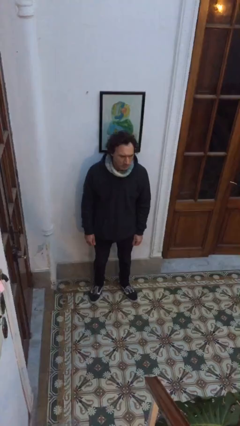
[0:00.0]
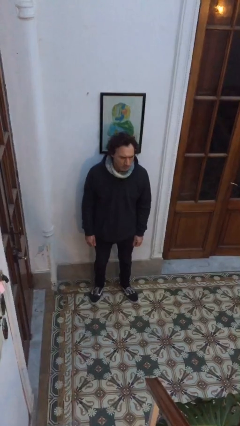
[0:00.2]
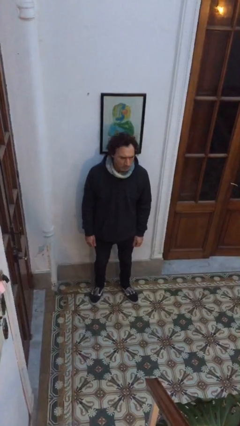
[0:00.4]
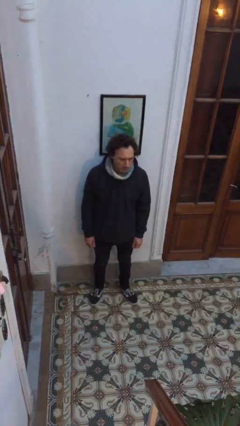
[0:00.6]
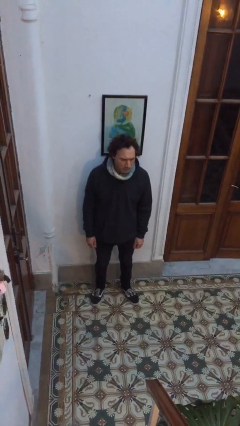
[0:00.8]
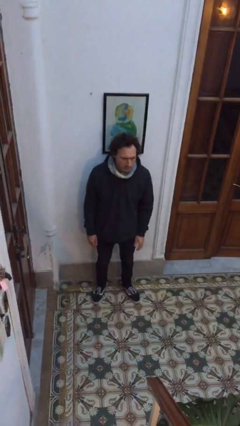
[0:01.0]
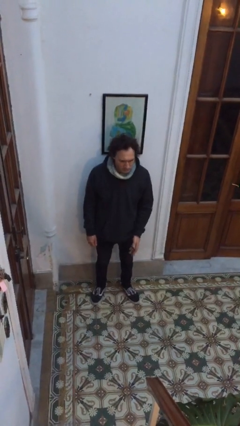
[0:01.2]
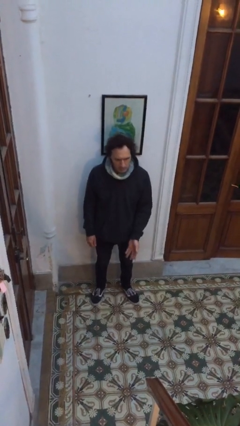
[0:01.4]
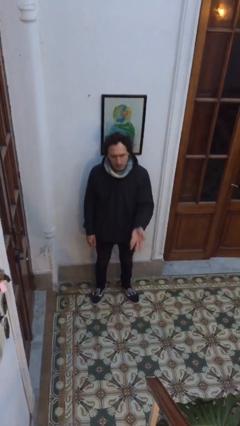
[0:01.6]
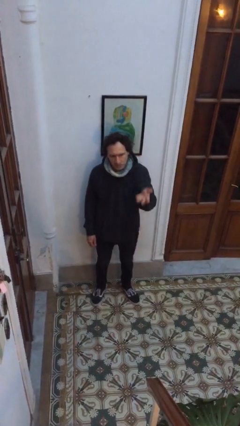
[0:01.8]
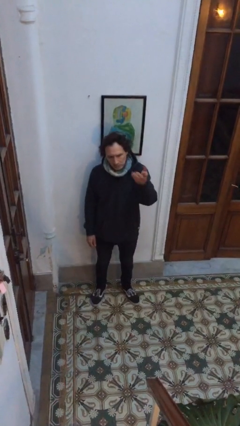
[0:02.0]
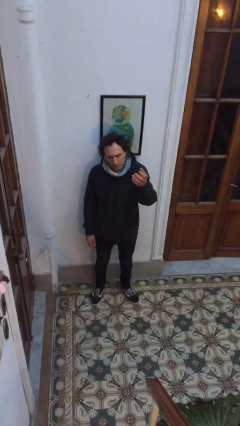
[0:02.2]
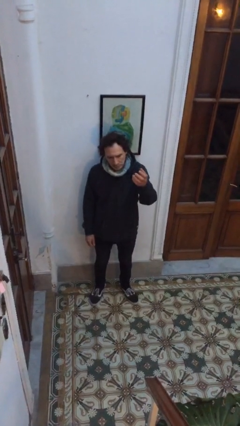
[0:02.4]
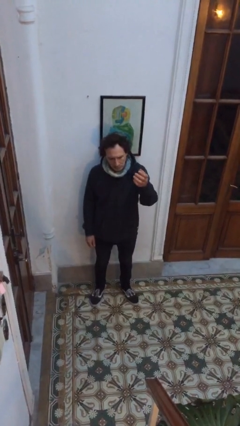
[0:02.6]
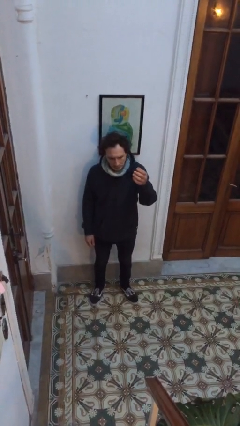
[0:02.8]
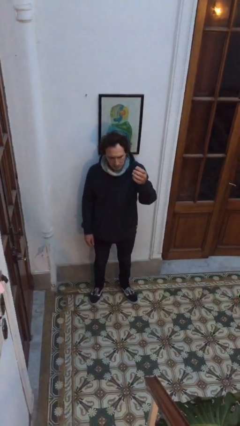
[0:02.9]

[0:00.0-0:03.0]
person gestures swipe up

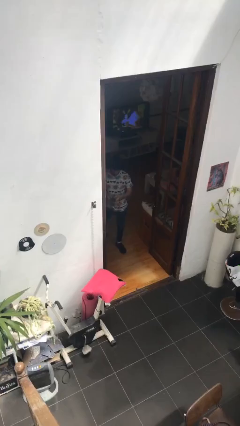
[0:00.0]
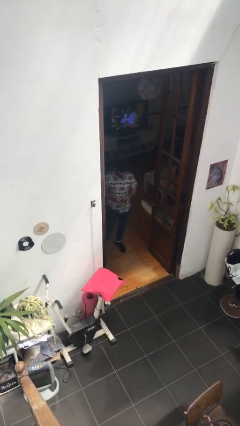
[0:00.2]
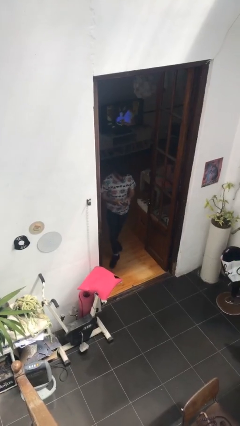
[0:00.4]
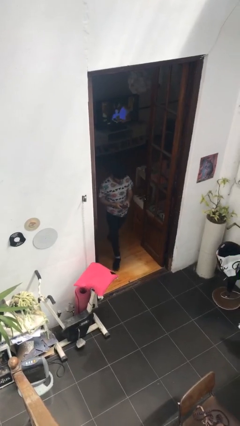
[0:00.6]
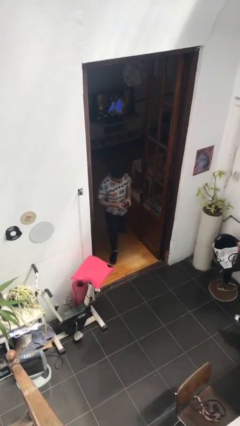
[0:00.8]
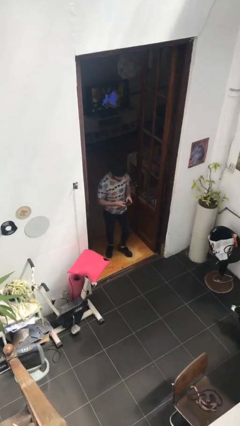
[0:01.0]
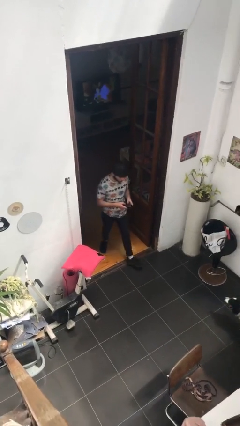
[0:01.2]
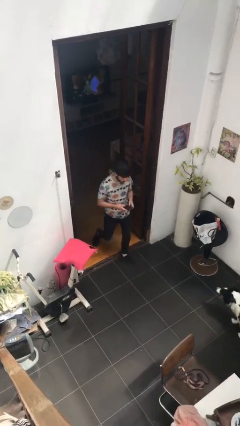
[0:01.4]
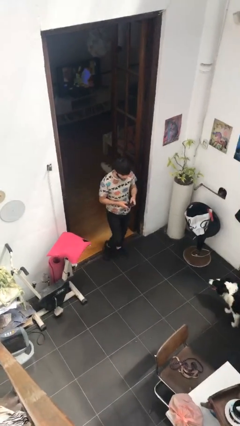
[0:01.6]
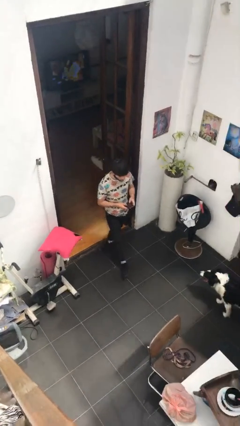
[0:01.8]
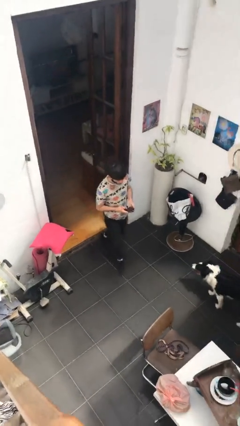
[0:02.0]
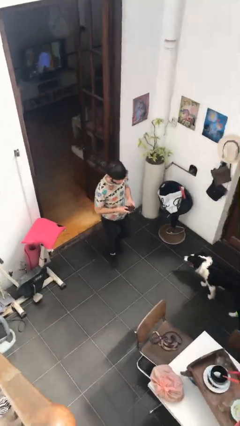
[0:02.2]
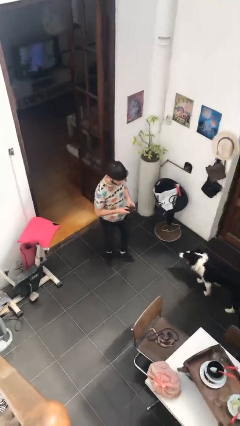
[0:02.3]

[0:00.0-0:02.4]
person enters scene through structure

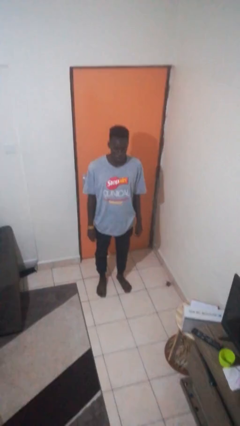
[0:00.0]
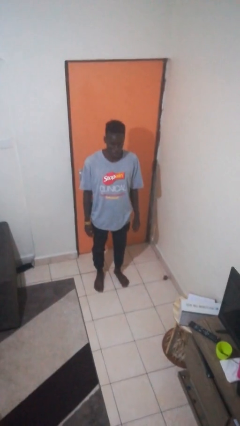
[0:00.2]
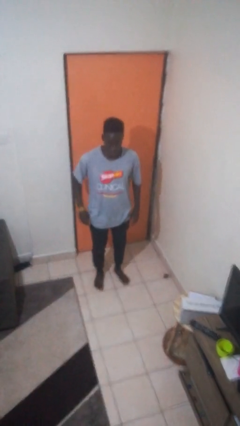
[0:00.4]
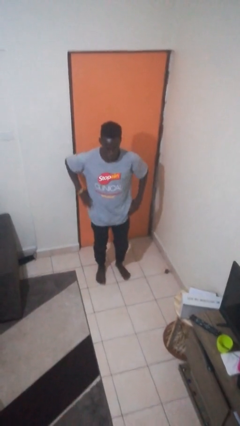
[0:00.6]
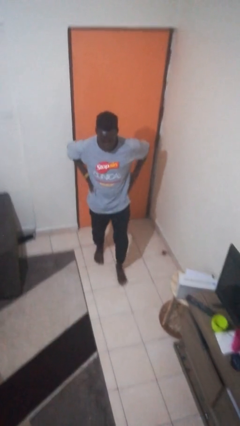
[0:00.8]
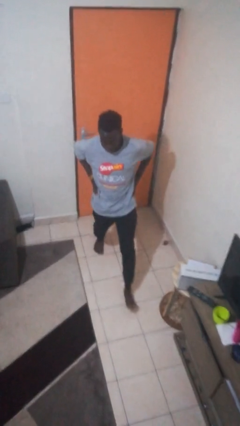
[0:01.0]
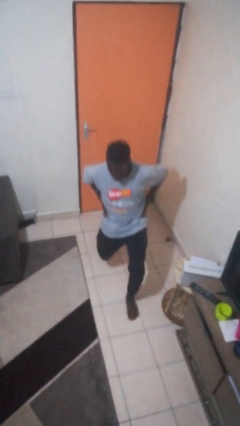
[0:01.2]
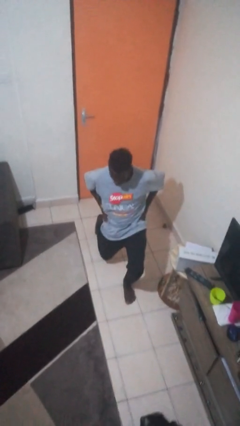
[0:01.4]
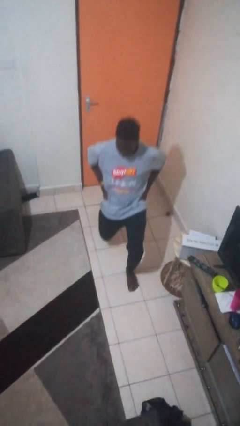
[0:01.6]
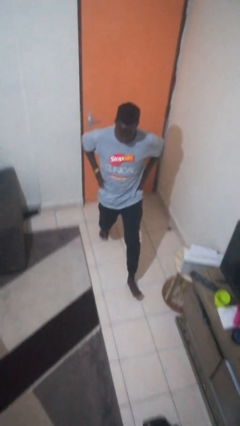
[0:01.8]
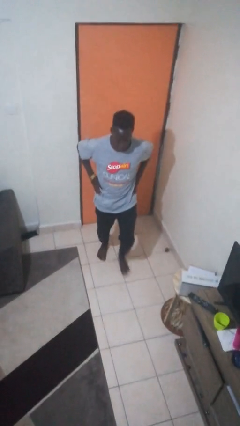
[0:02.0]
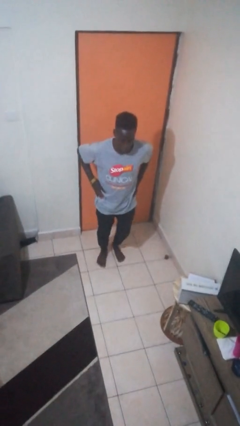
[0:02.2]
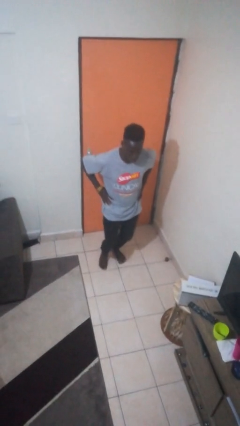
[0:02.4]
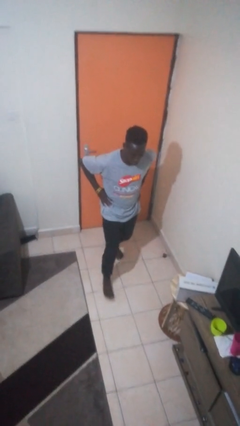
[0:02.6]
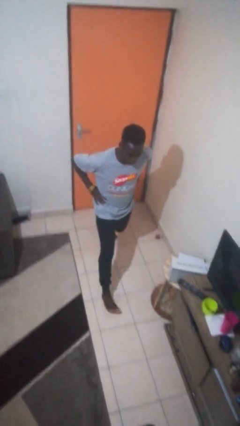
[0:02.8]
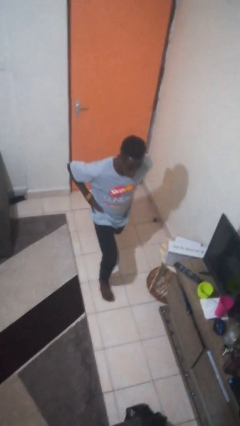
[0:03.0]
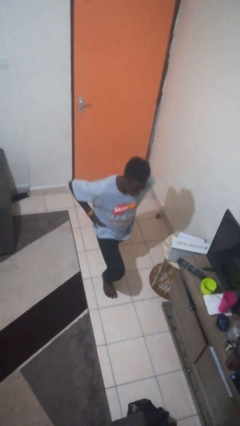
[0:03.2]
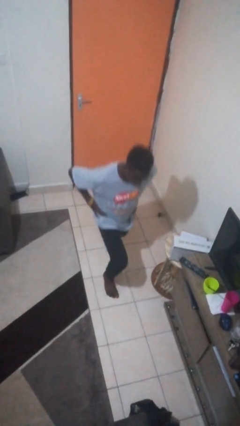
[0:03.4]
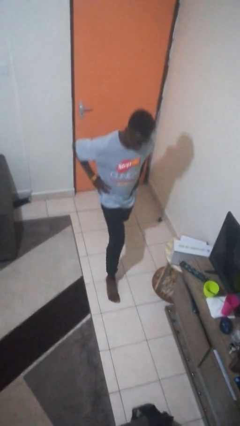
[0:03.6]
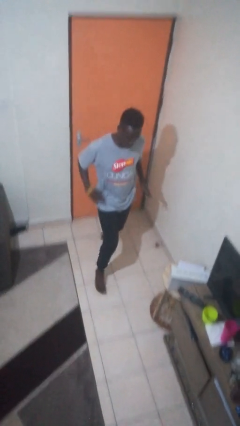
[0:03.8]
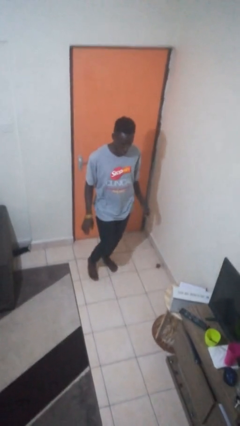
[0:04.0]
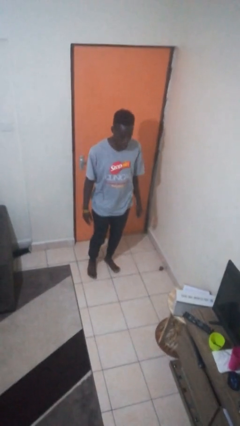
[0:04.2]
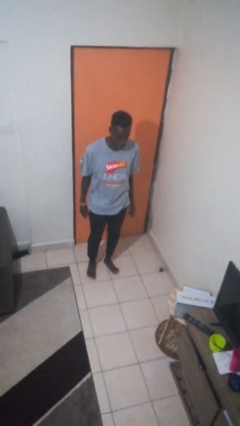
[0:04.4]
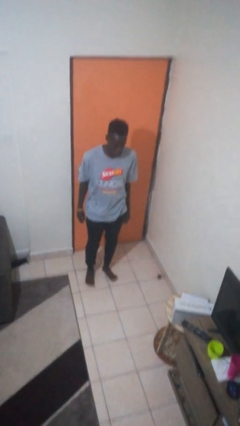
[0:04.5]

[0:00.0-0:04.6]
person exercises with lunges

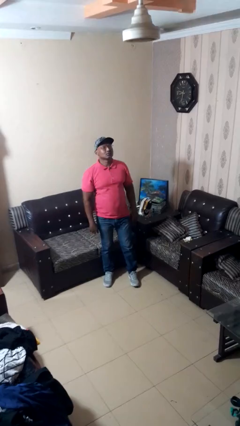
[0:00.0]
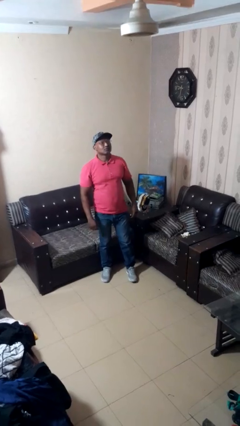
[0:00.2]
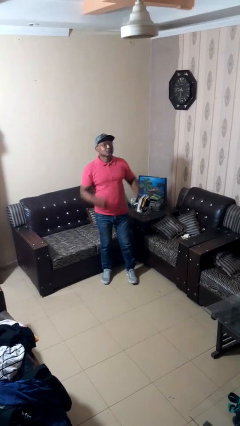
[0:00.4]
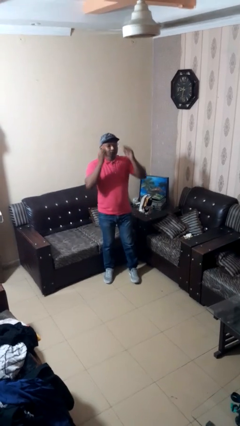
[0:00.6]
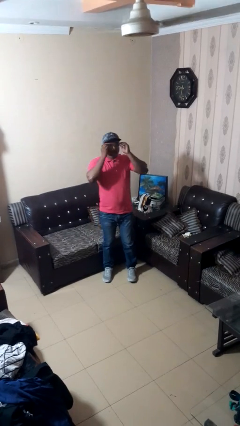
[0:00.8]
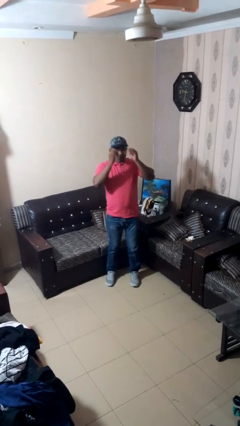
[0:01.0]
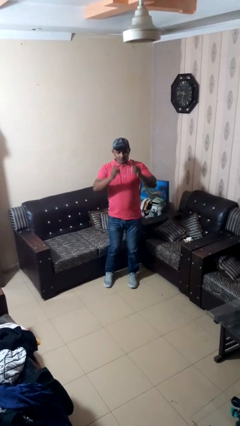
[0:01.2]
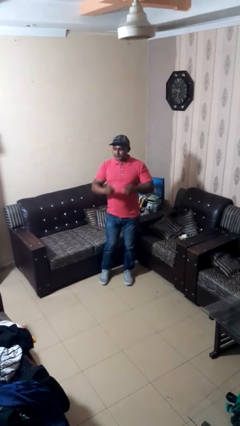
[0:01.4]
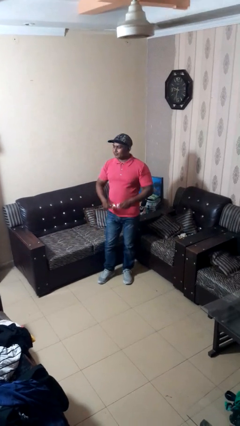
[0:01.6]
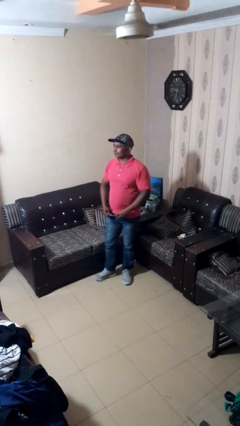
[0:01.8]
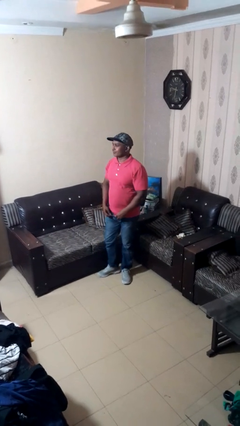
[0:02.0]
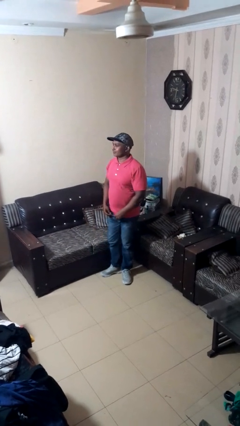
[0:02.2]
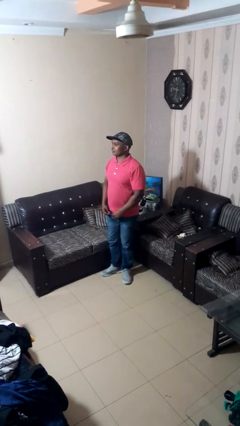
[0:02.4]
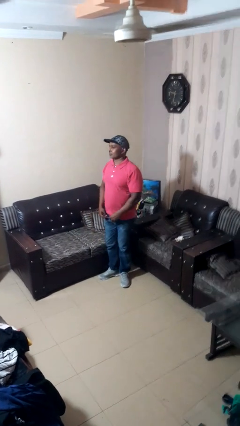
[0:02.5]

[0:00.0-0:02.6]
person takes off glasses

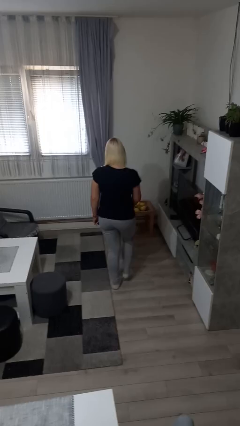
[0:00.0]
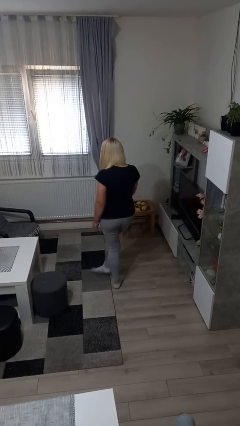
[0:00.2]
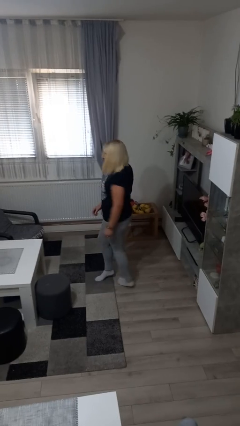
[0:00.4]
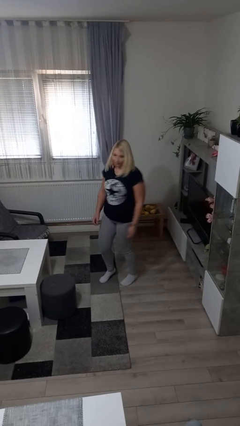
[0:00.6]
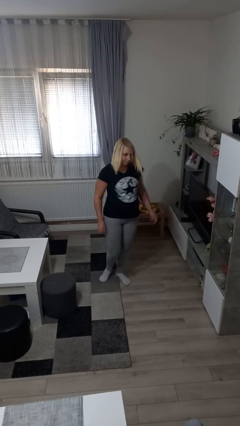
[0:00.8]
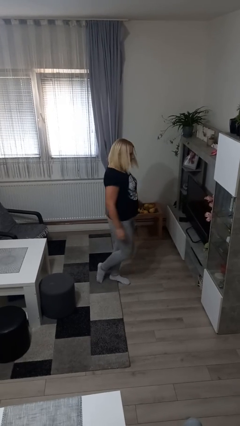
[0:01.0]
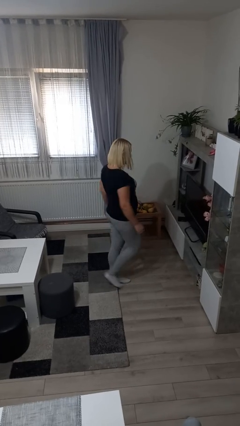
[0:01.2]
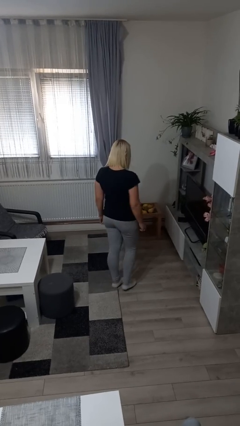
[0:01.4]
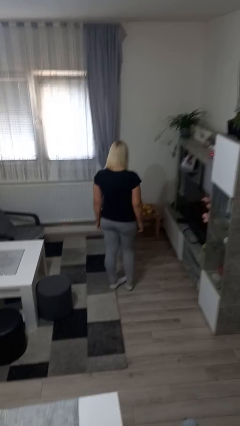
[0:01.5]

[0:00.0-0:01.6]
person twirls

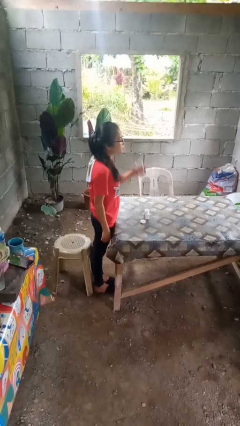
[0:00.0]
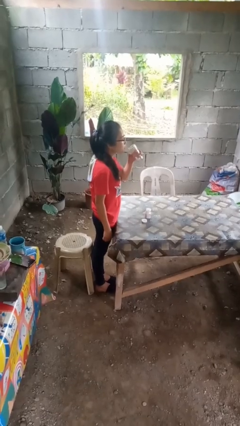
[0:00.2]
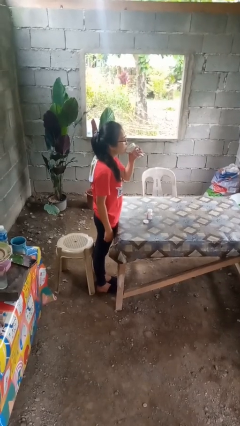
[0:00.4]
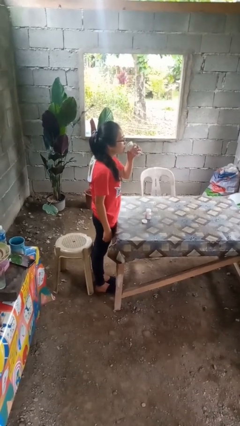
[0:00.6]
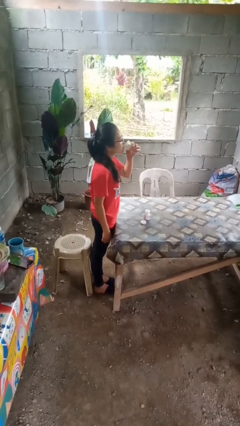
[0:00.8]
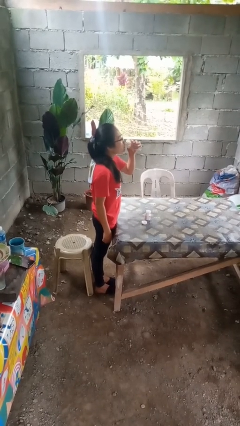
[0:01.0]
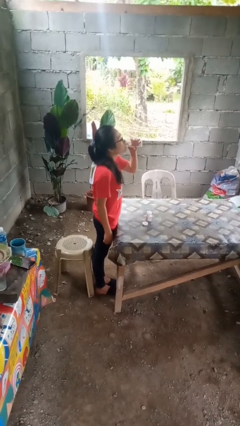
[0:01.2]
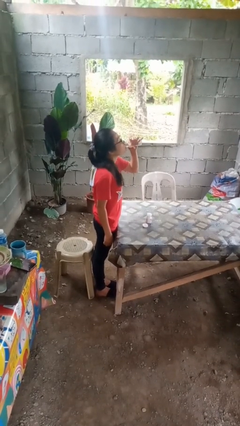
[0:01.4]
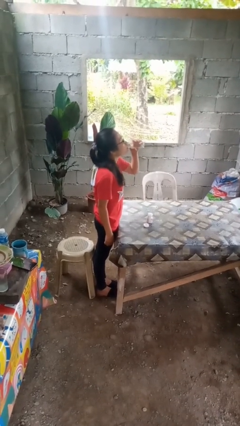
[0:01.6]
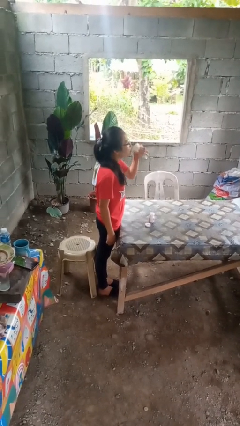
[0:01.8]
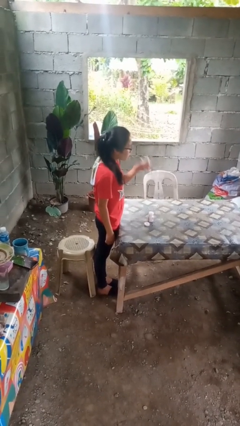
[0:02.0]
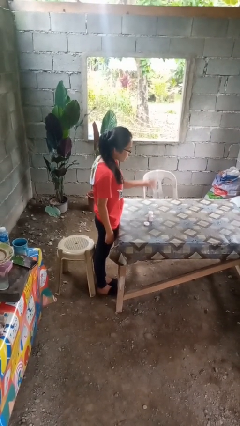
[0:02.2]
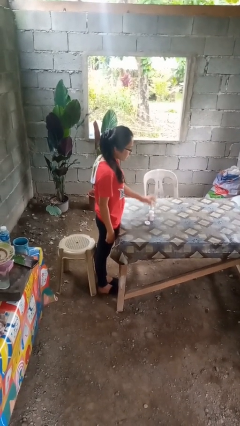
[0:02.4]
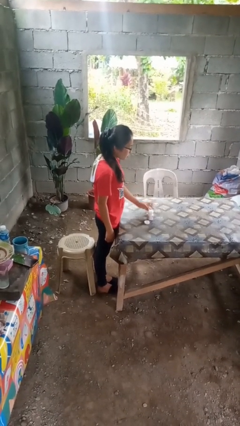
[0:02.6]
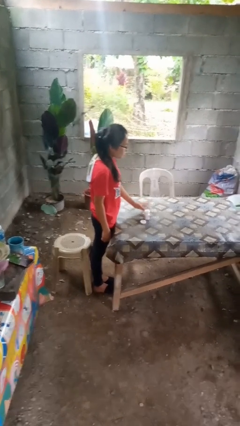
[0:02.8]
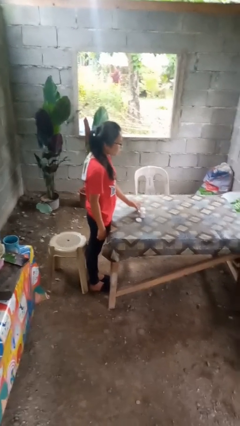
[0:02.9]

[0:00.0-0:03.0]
person drinks from cup
